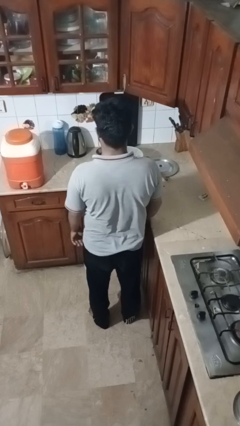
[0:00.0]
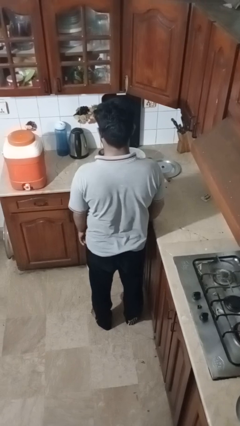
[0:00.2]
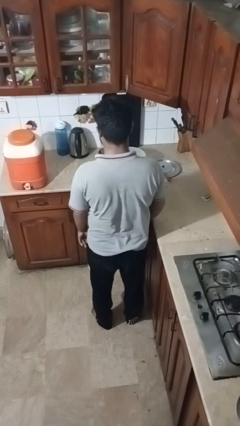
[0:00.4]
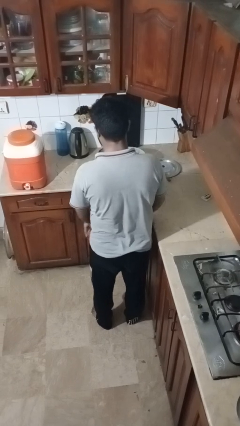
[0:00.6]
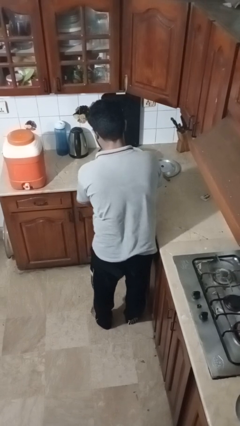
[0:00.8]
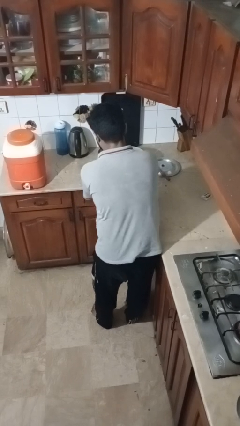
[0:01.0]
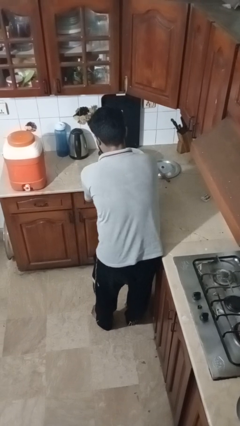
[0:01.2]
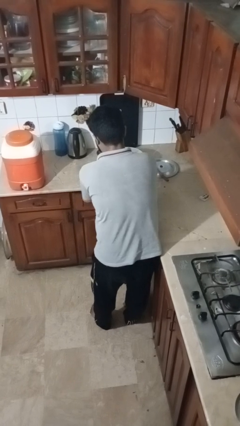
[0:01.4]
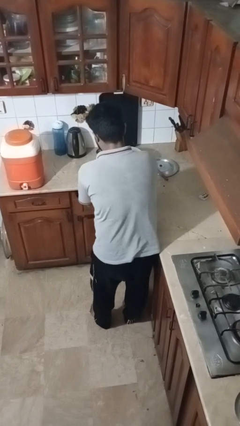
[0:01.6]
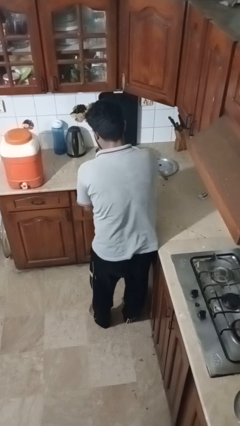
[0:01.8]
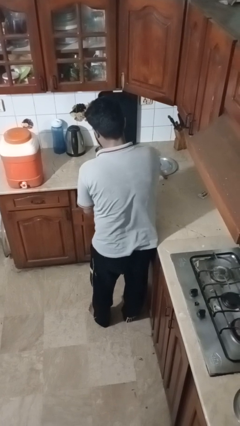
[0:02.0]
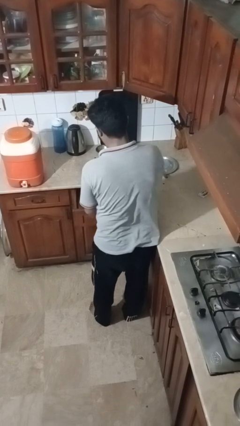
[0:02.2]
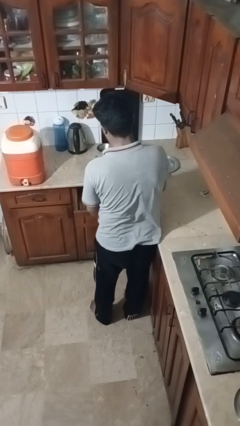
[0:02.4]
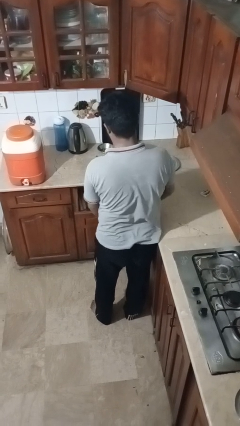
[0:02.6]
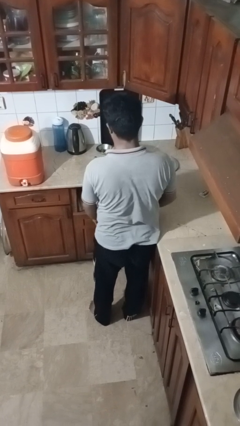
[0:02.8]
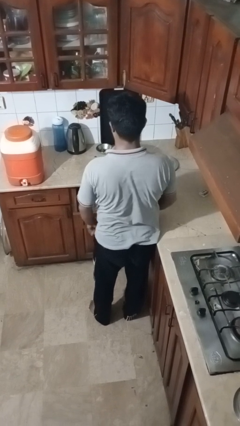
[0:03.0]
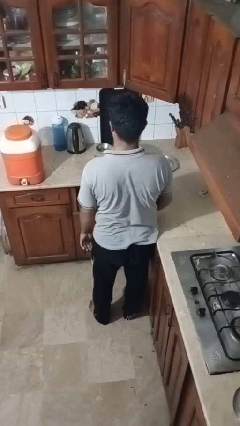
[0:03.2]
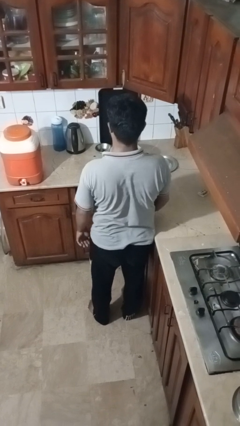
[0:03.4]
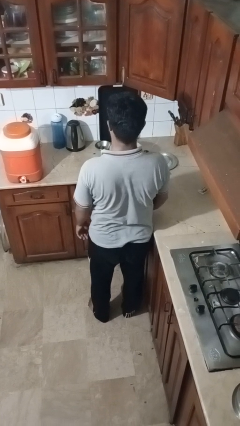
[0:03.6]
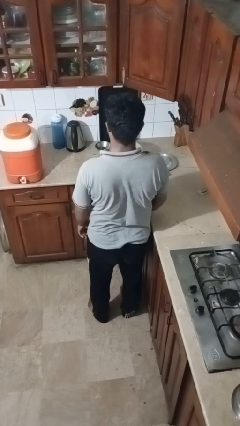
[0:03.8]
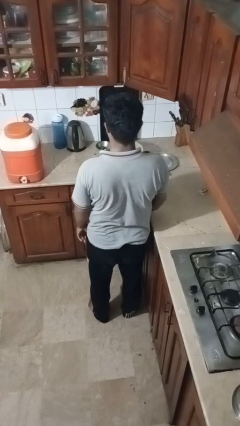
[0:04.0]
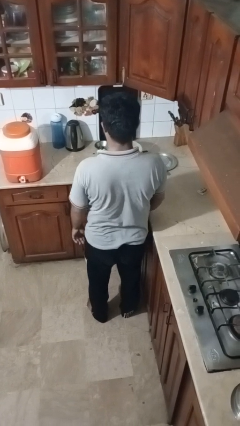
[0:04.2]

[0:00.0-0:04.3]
person opens kitchen drawer

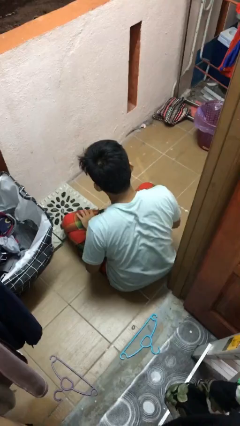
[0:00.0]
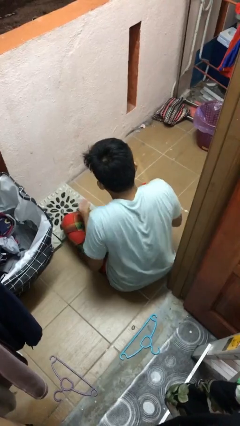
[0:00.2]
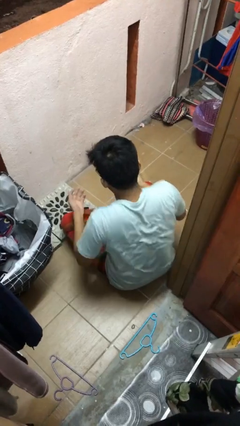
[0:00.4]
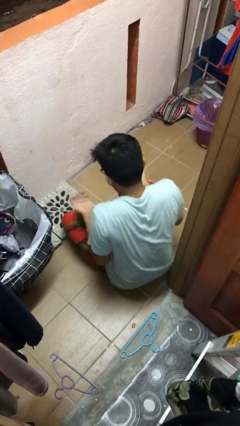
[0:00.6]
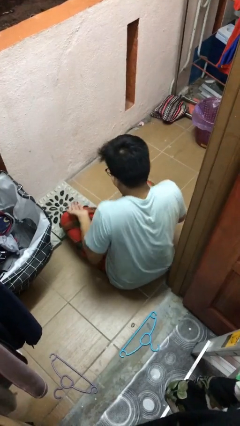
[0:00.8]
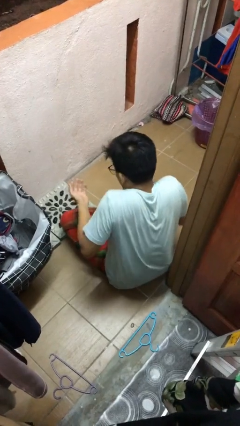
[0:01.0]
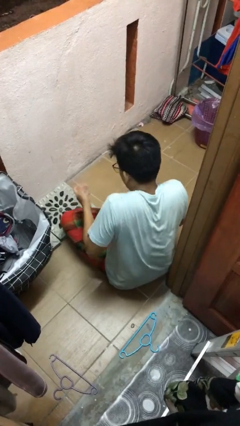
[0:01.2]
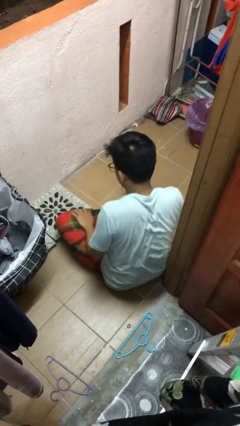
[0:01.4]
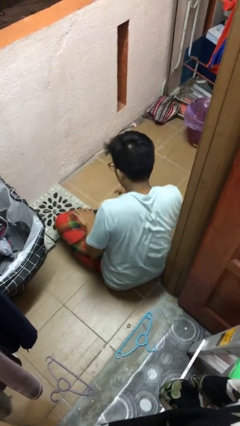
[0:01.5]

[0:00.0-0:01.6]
person shrugs

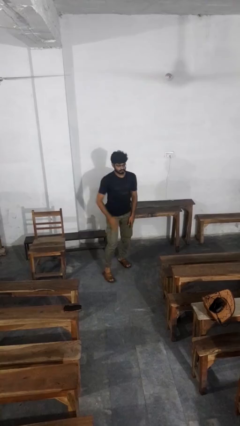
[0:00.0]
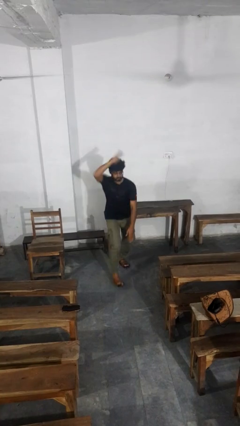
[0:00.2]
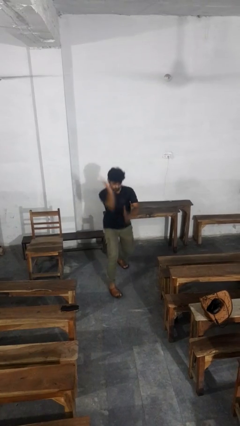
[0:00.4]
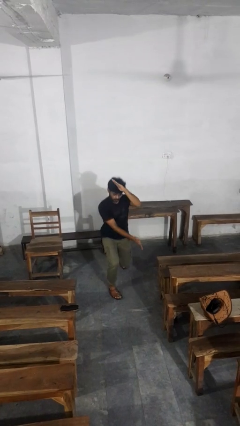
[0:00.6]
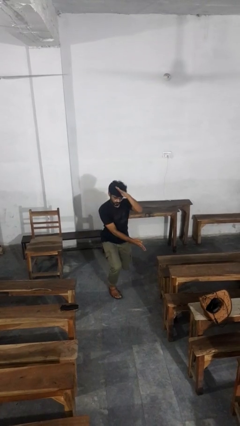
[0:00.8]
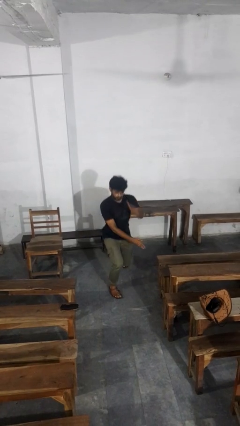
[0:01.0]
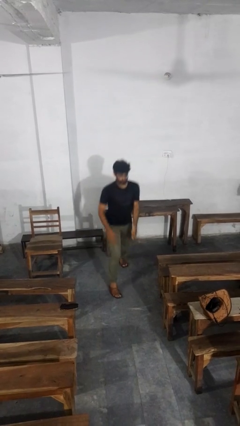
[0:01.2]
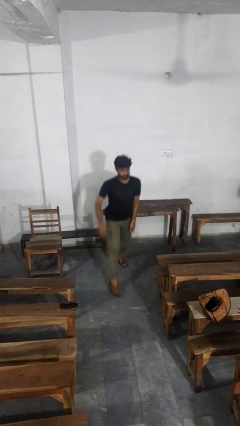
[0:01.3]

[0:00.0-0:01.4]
person karate chop

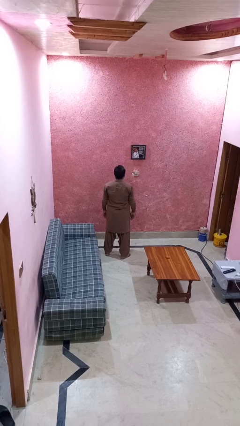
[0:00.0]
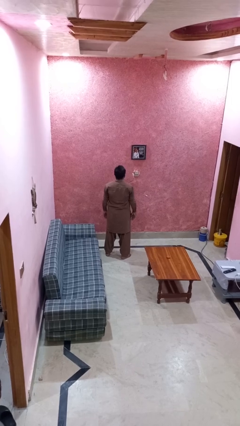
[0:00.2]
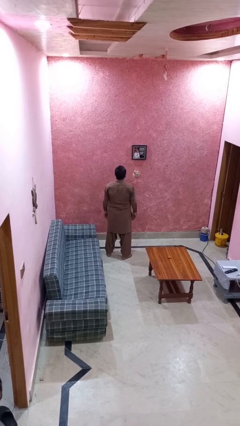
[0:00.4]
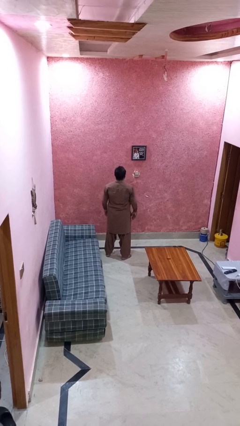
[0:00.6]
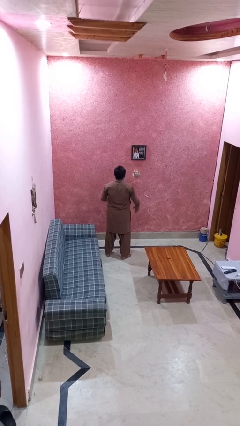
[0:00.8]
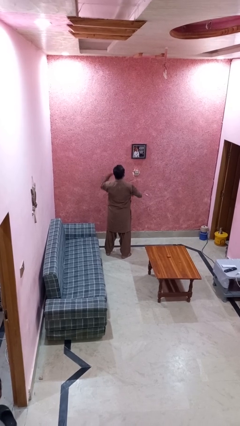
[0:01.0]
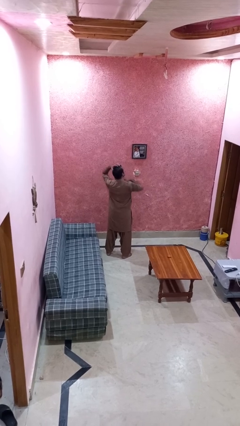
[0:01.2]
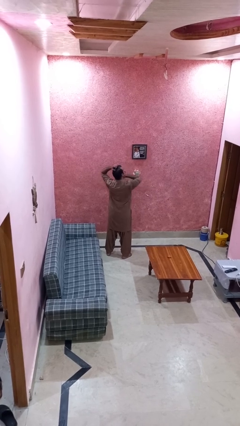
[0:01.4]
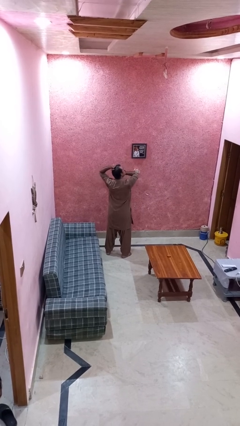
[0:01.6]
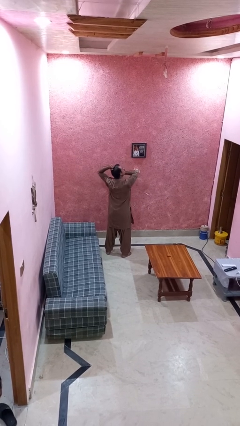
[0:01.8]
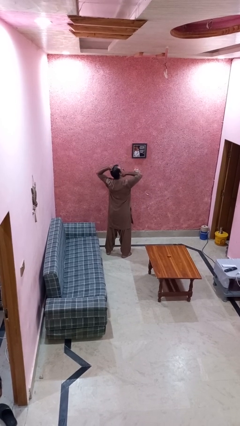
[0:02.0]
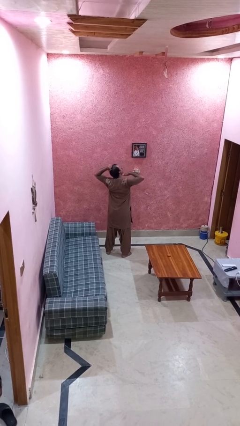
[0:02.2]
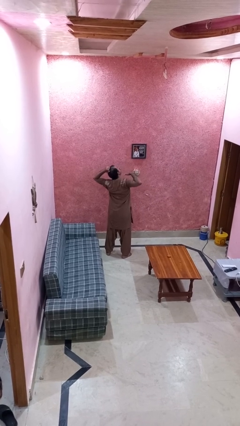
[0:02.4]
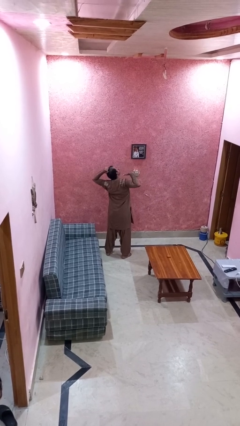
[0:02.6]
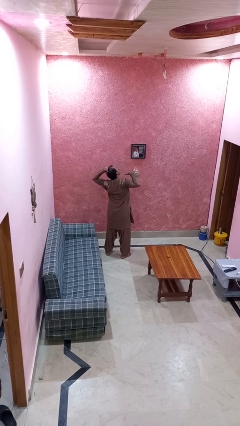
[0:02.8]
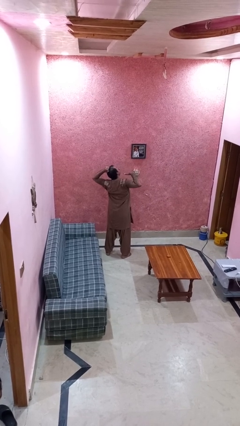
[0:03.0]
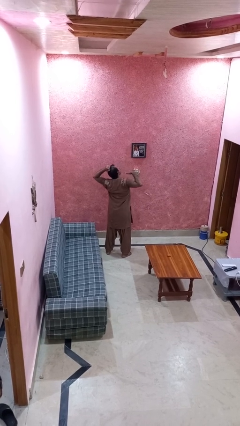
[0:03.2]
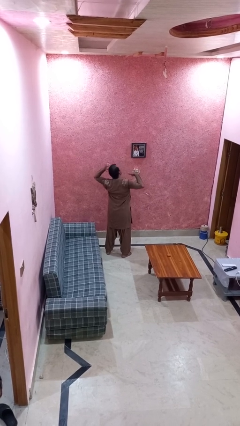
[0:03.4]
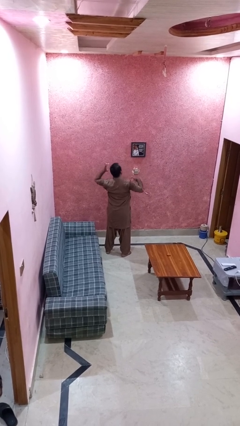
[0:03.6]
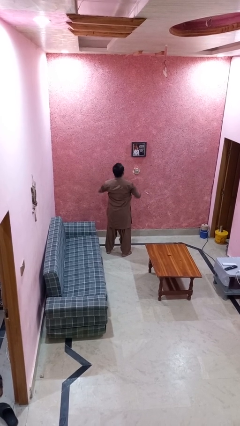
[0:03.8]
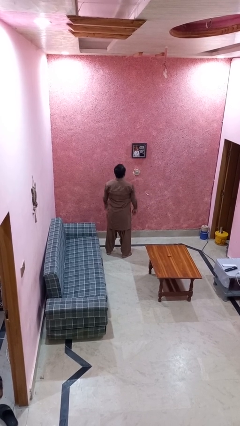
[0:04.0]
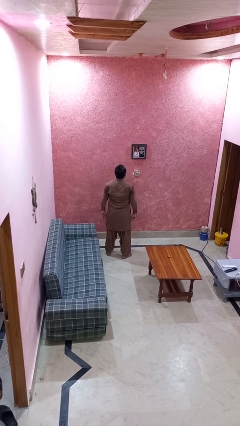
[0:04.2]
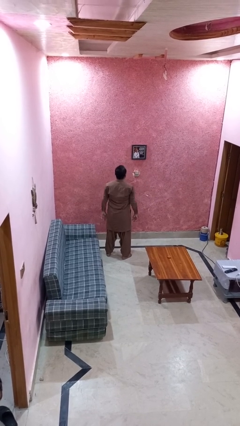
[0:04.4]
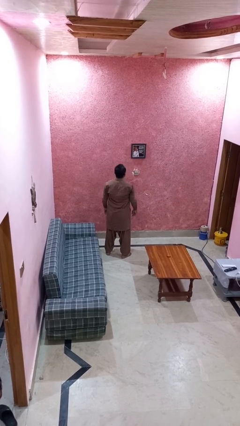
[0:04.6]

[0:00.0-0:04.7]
person gestures cut

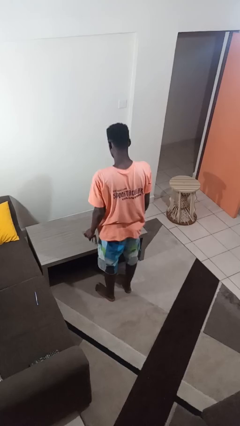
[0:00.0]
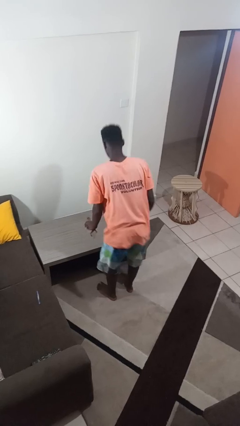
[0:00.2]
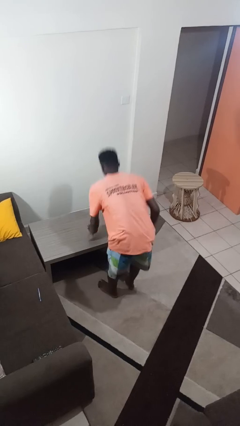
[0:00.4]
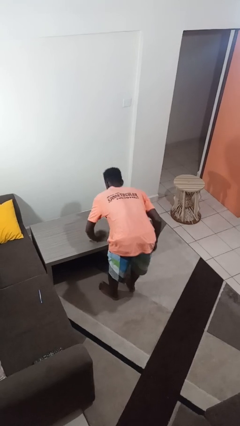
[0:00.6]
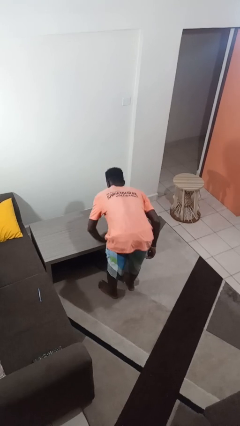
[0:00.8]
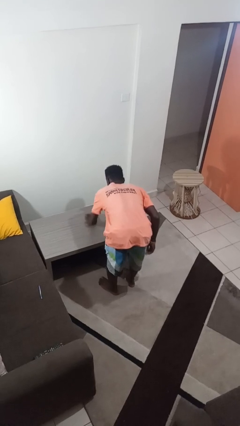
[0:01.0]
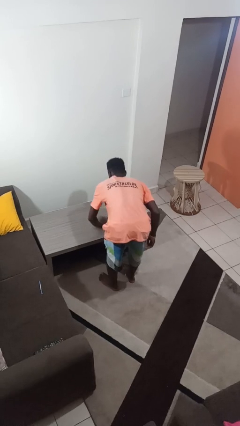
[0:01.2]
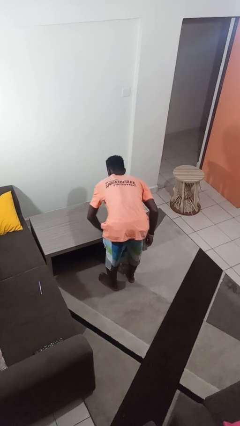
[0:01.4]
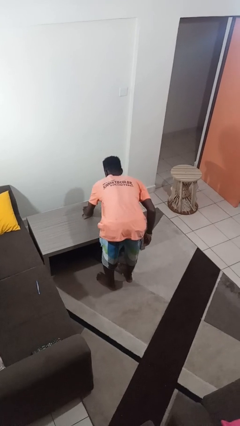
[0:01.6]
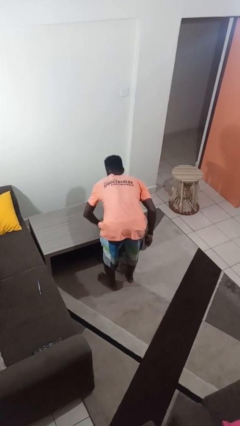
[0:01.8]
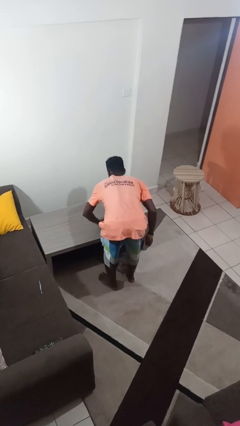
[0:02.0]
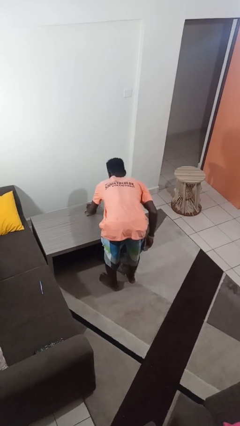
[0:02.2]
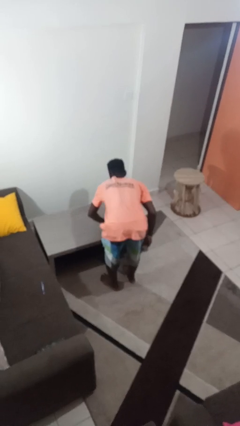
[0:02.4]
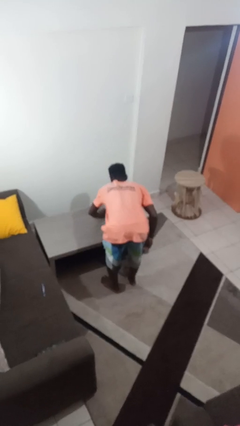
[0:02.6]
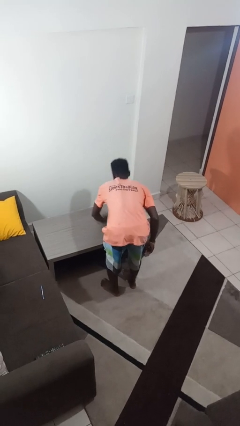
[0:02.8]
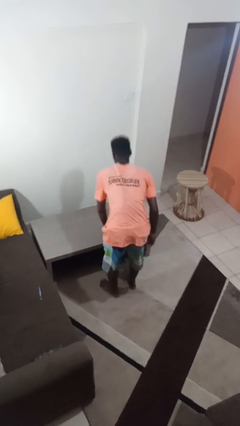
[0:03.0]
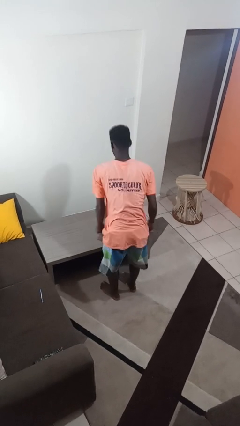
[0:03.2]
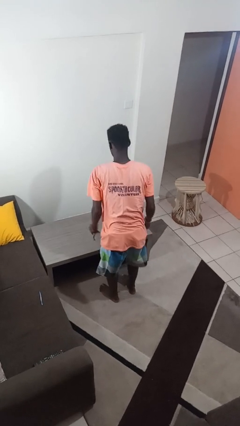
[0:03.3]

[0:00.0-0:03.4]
person cleans table with rag

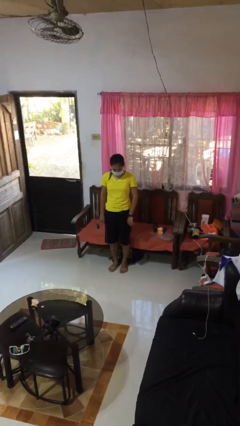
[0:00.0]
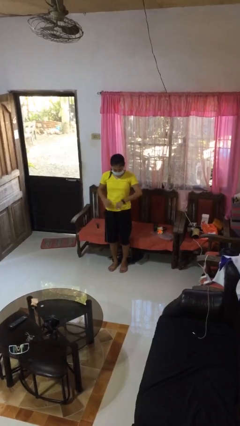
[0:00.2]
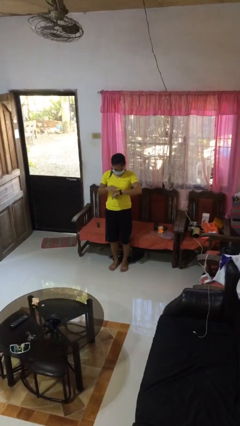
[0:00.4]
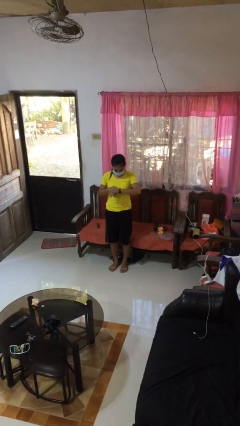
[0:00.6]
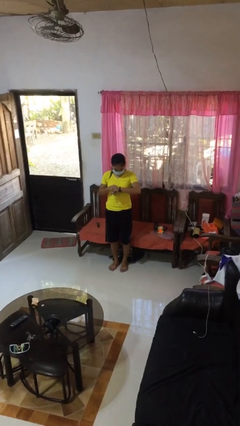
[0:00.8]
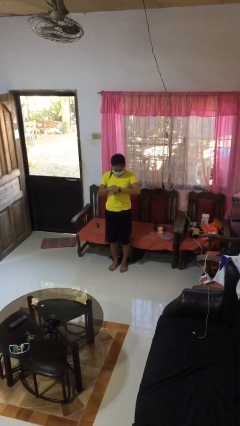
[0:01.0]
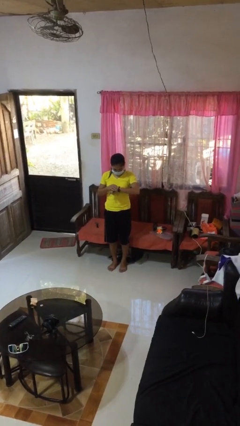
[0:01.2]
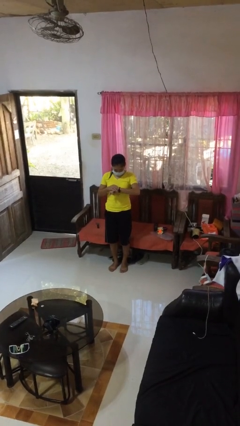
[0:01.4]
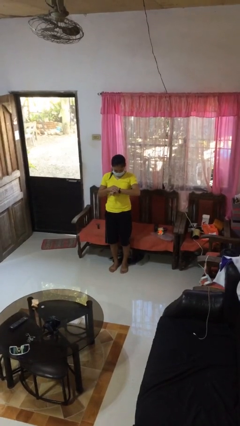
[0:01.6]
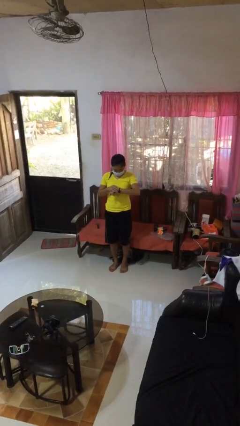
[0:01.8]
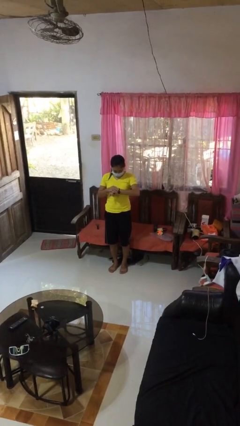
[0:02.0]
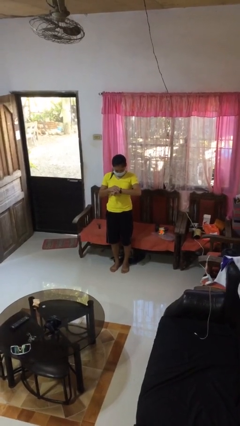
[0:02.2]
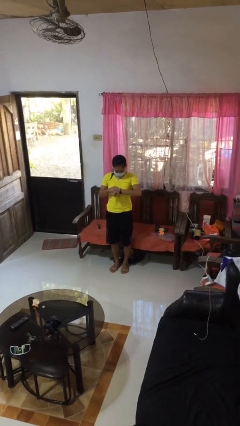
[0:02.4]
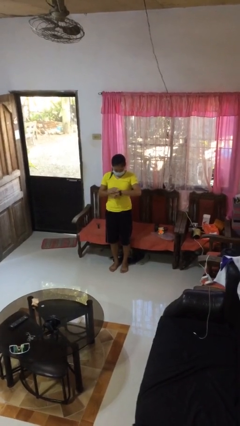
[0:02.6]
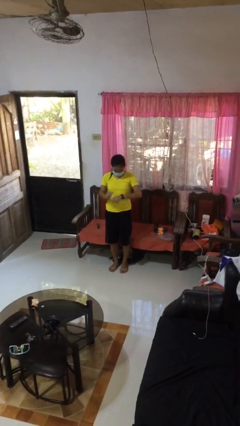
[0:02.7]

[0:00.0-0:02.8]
person looks at wristwatch
